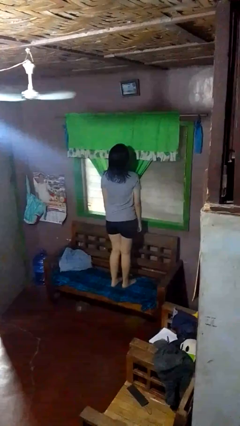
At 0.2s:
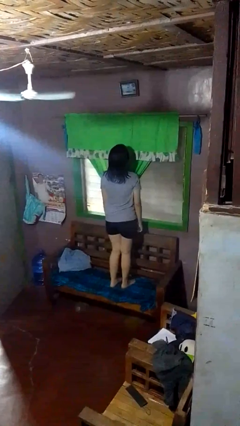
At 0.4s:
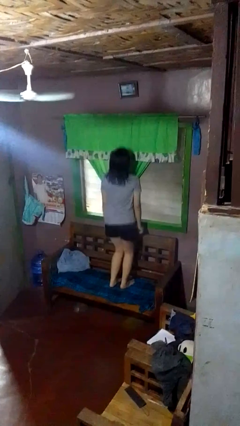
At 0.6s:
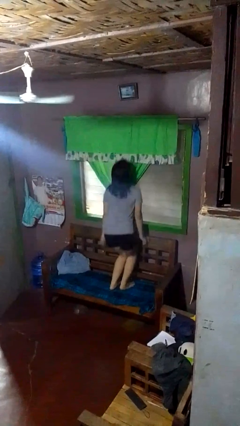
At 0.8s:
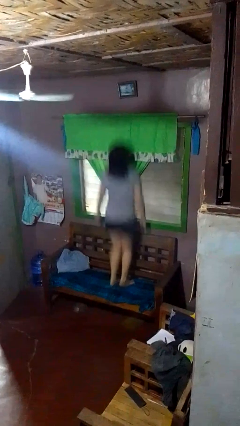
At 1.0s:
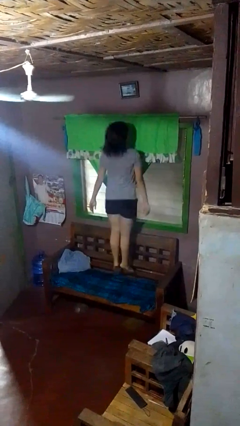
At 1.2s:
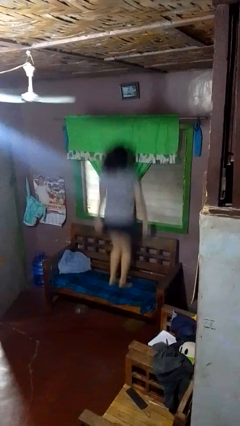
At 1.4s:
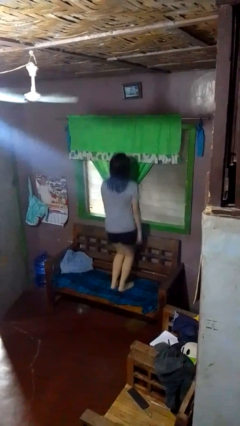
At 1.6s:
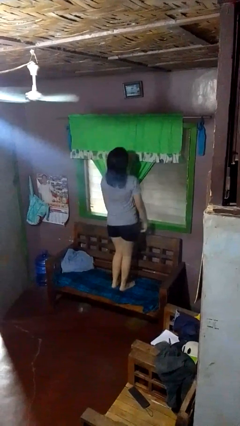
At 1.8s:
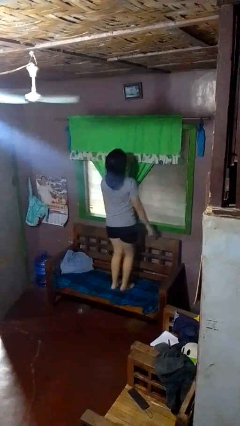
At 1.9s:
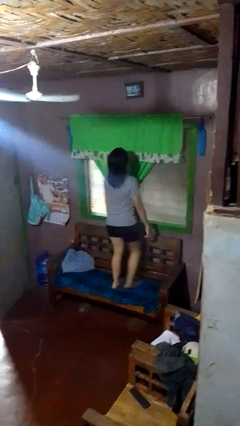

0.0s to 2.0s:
person jumps on couch

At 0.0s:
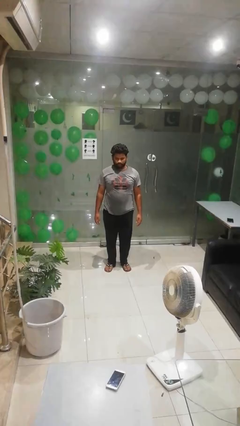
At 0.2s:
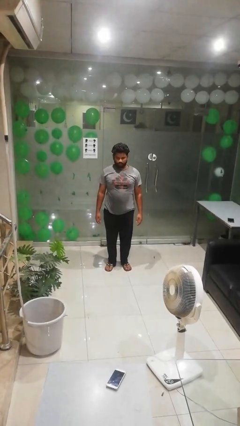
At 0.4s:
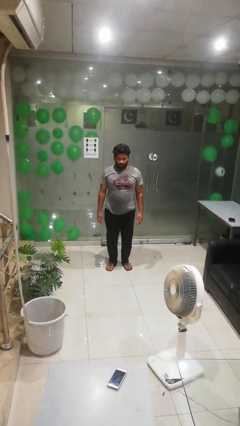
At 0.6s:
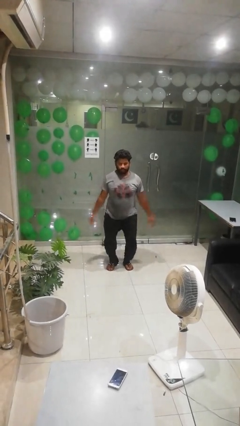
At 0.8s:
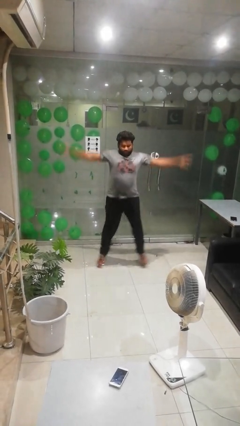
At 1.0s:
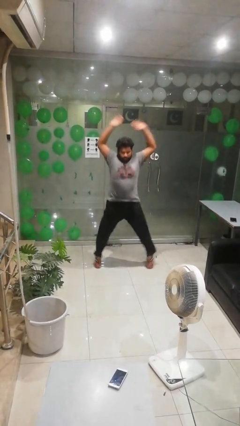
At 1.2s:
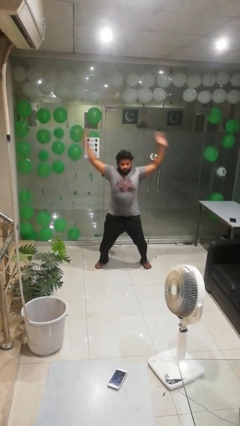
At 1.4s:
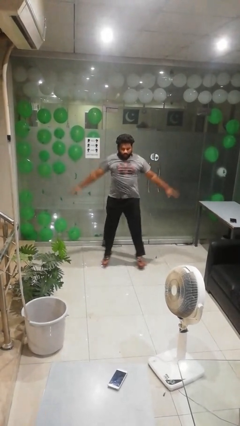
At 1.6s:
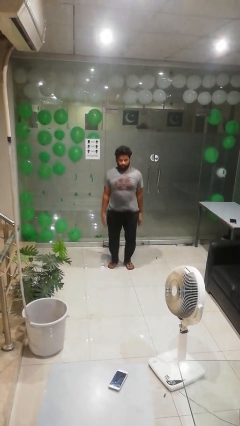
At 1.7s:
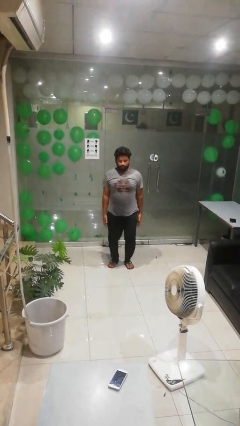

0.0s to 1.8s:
person exercises with jumping jacks

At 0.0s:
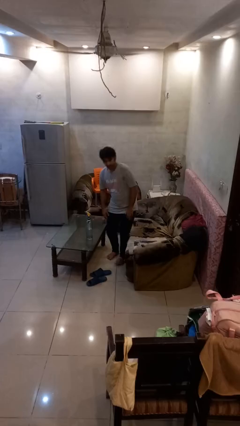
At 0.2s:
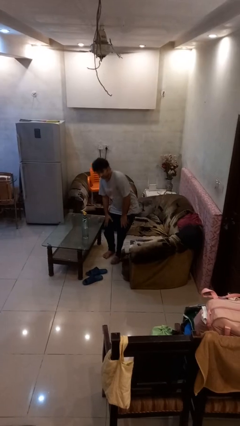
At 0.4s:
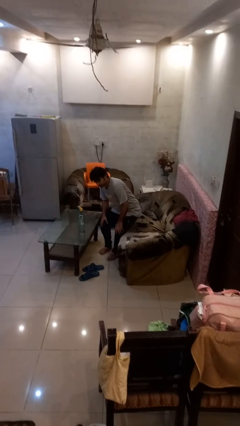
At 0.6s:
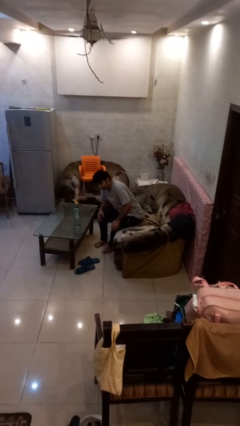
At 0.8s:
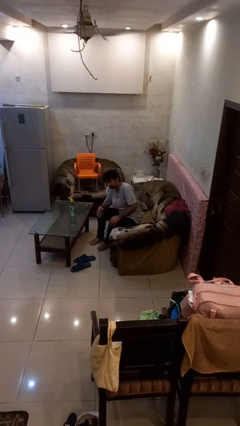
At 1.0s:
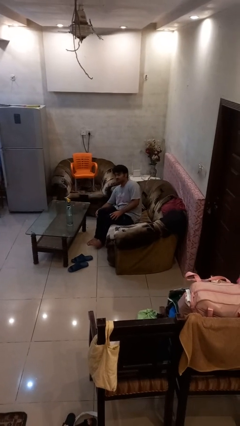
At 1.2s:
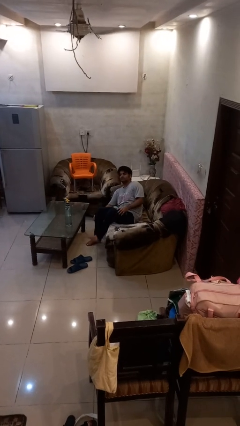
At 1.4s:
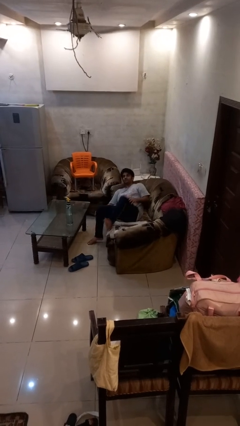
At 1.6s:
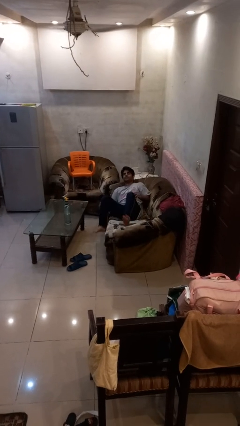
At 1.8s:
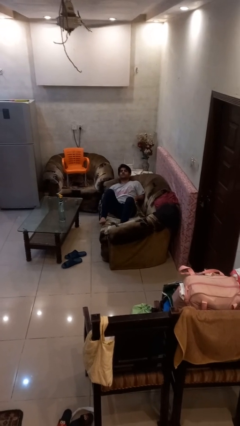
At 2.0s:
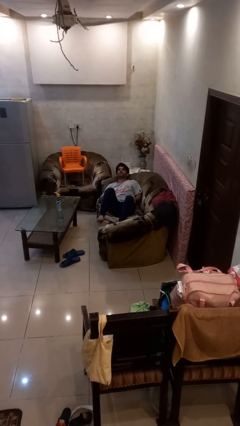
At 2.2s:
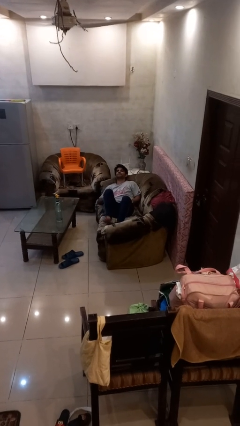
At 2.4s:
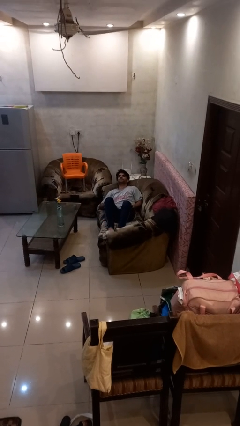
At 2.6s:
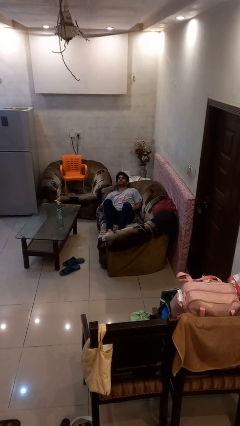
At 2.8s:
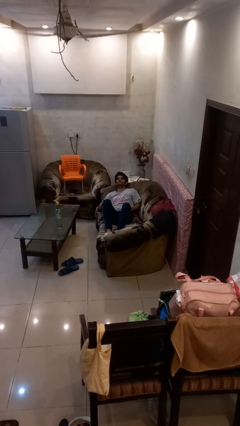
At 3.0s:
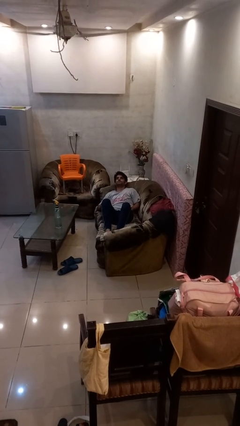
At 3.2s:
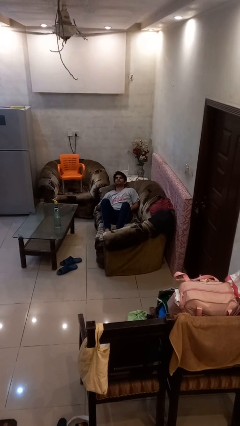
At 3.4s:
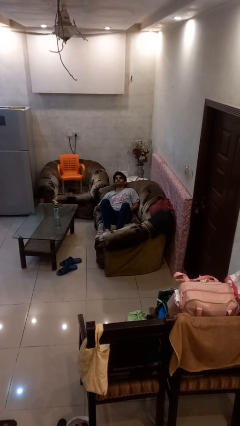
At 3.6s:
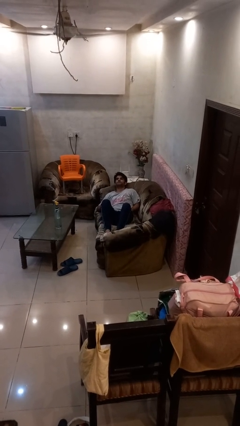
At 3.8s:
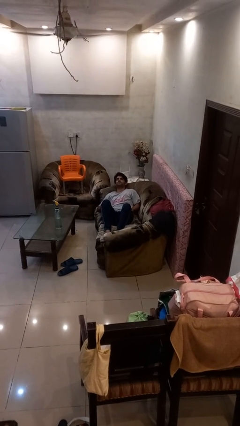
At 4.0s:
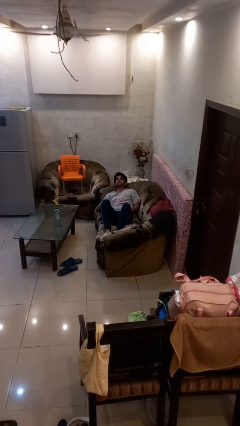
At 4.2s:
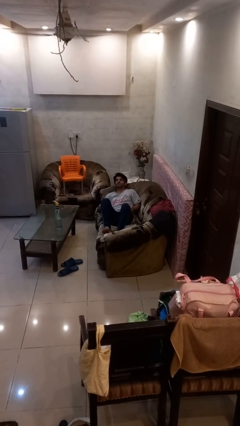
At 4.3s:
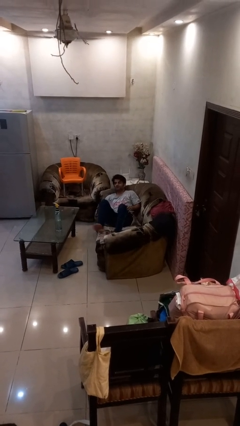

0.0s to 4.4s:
person lies down on couch

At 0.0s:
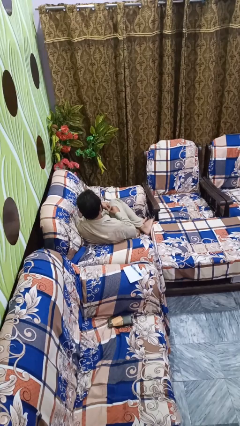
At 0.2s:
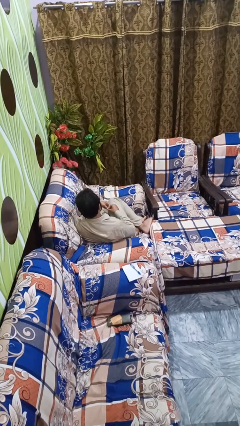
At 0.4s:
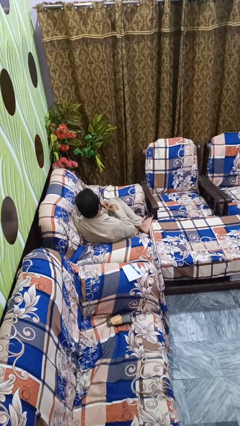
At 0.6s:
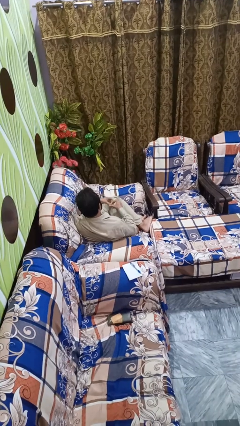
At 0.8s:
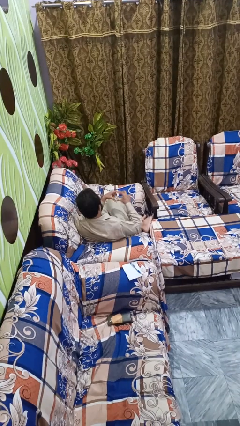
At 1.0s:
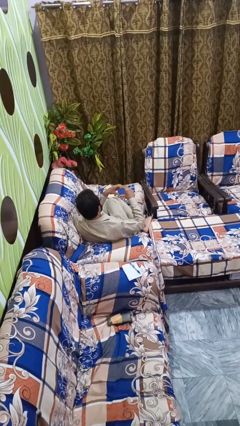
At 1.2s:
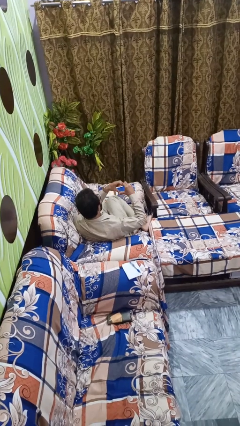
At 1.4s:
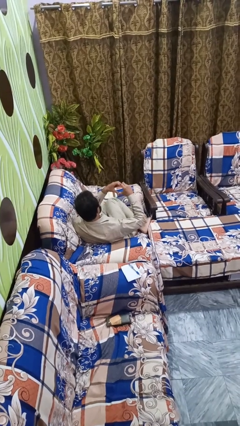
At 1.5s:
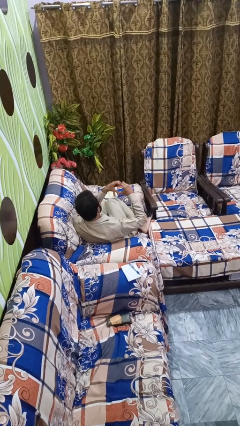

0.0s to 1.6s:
person gestures heart

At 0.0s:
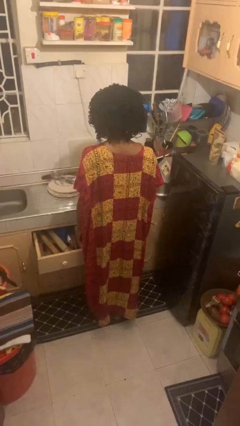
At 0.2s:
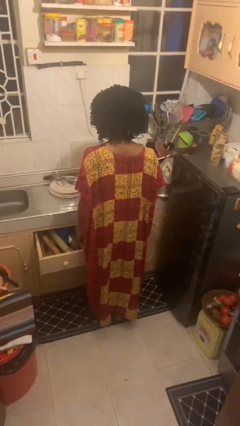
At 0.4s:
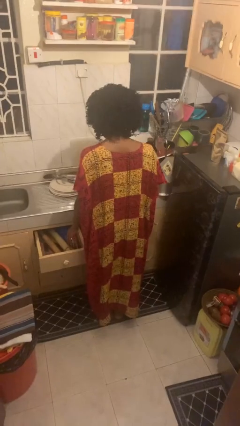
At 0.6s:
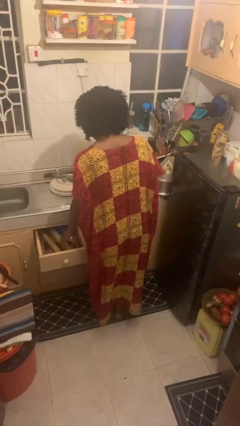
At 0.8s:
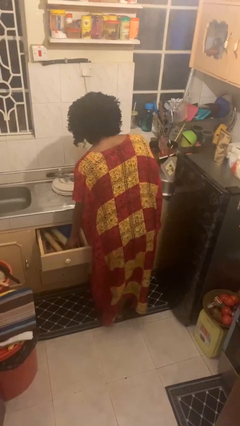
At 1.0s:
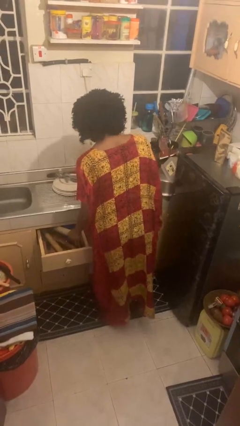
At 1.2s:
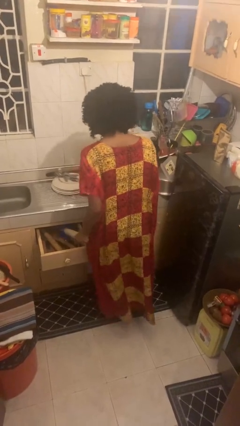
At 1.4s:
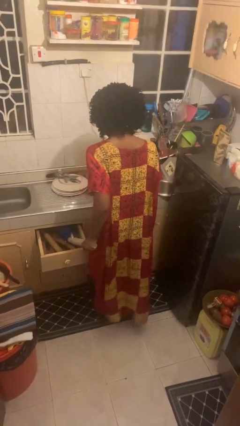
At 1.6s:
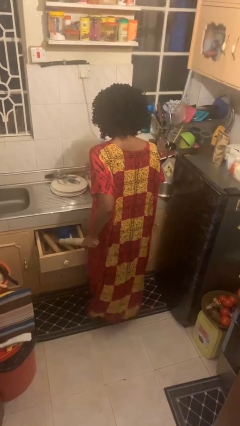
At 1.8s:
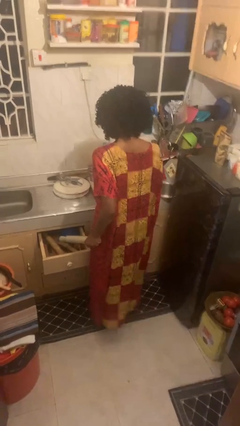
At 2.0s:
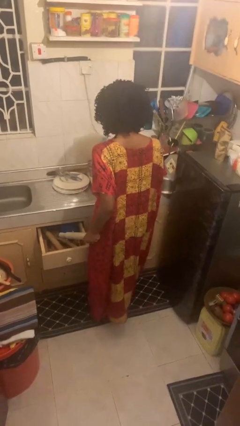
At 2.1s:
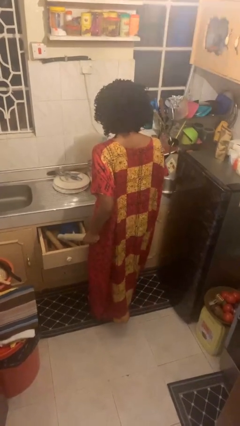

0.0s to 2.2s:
person takes object from kitchen drawer

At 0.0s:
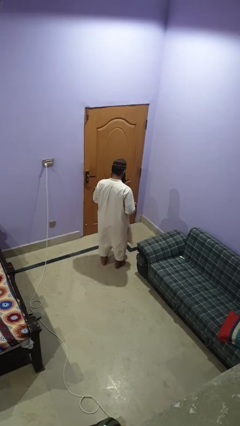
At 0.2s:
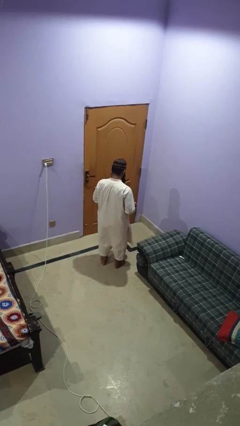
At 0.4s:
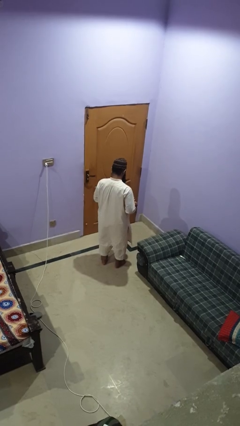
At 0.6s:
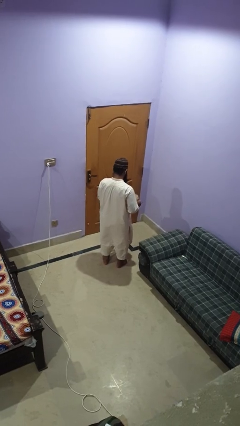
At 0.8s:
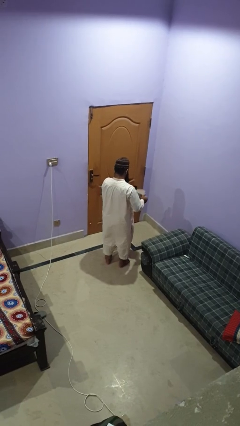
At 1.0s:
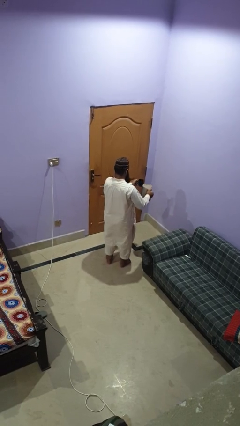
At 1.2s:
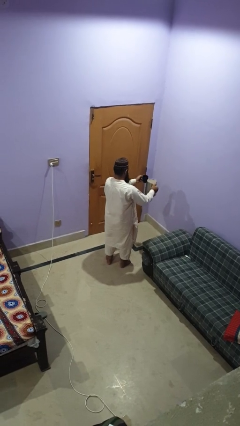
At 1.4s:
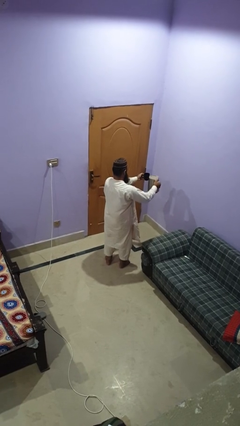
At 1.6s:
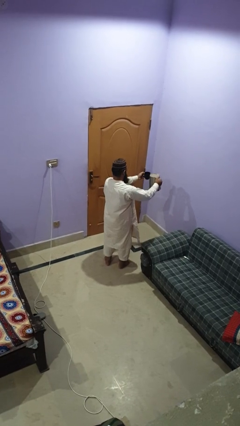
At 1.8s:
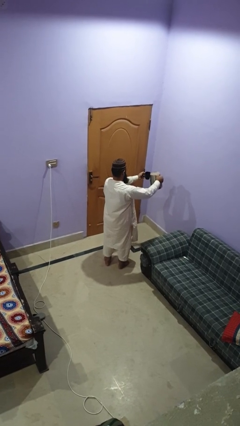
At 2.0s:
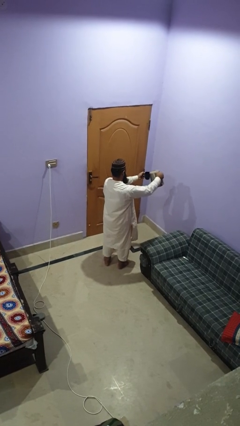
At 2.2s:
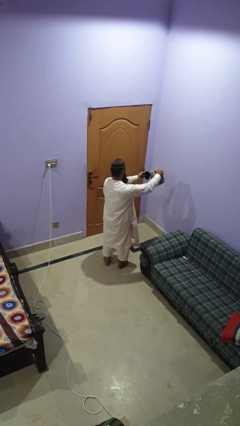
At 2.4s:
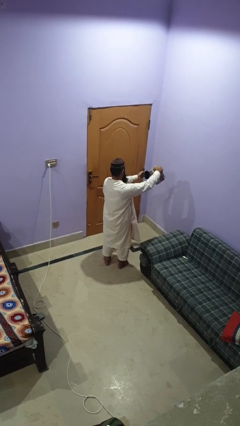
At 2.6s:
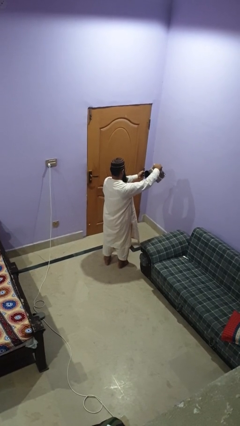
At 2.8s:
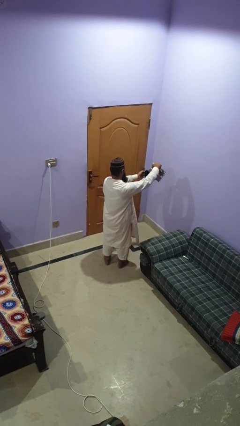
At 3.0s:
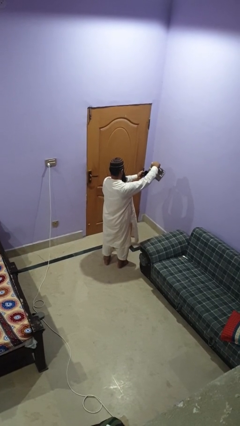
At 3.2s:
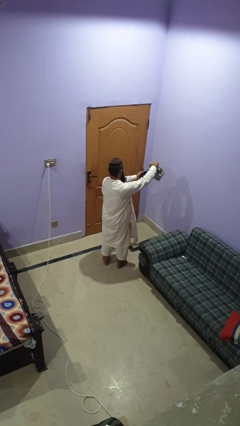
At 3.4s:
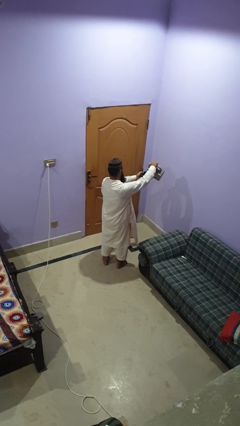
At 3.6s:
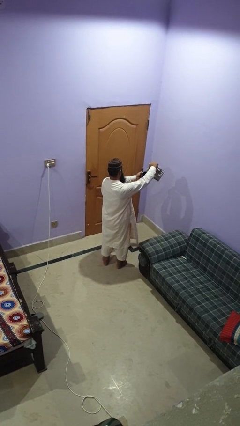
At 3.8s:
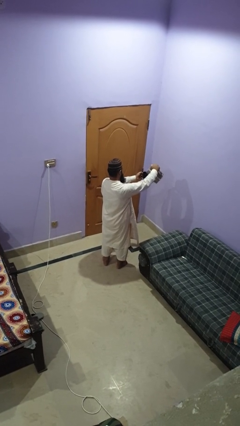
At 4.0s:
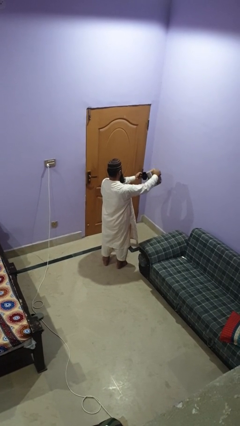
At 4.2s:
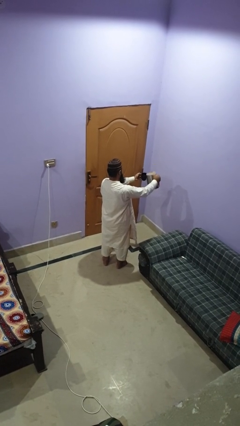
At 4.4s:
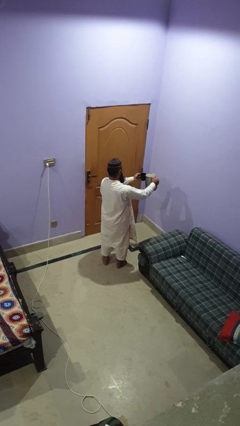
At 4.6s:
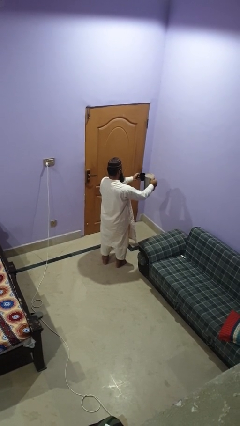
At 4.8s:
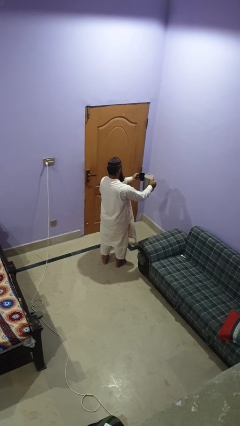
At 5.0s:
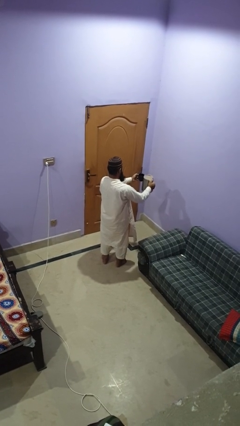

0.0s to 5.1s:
person pours coffee into mug

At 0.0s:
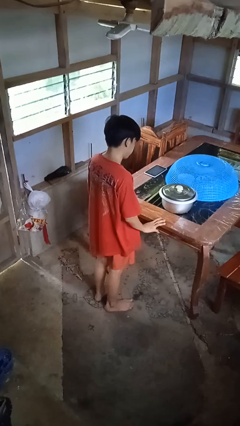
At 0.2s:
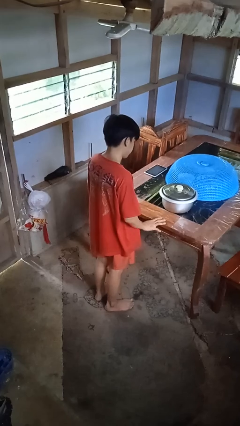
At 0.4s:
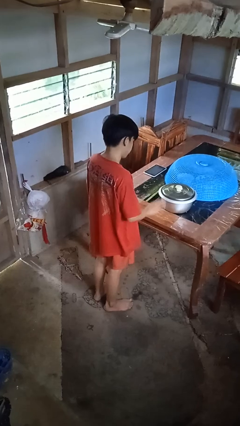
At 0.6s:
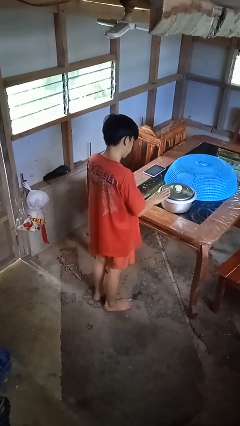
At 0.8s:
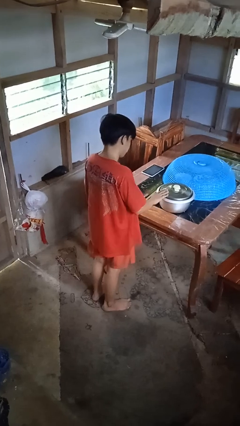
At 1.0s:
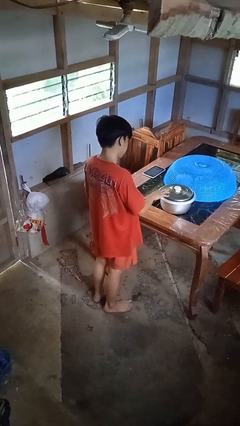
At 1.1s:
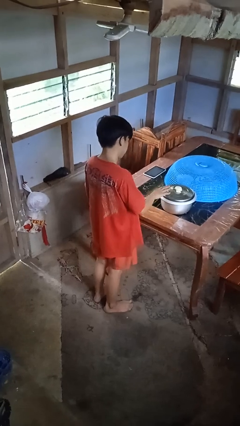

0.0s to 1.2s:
person taps object with finger
